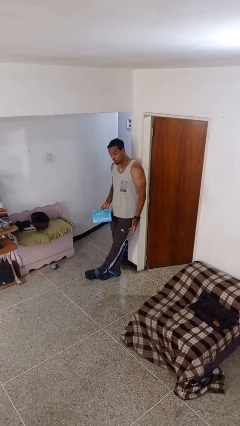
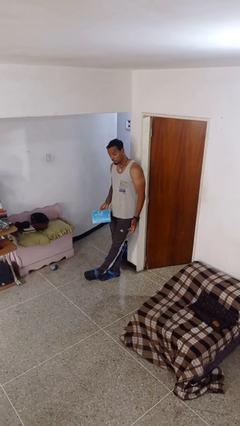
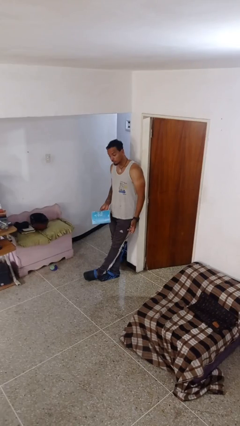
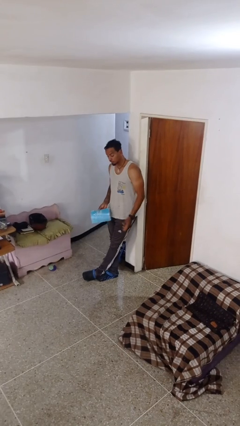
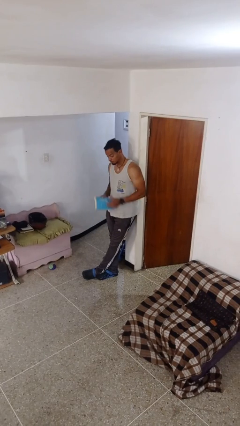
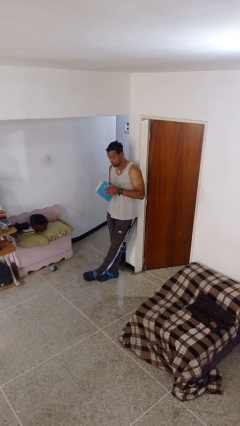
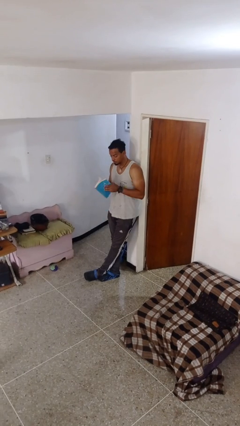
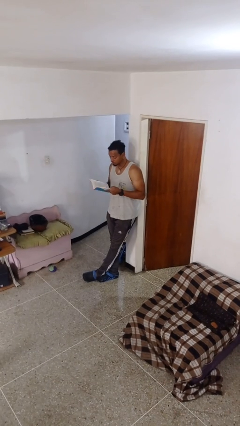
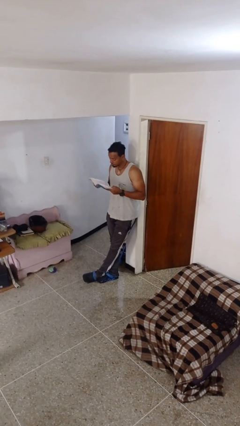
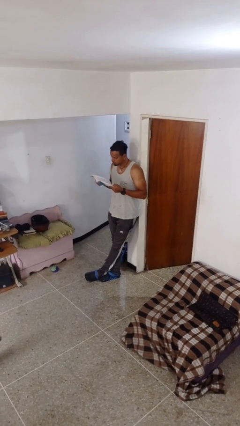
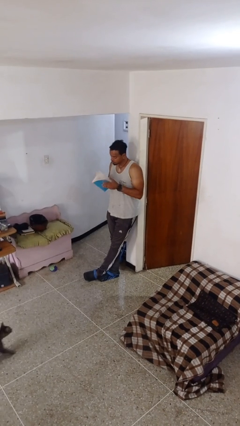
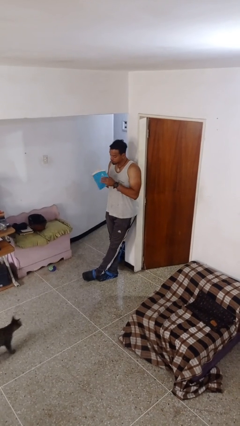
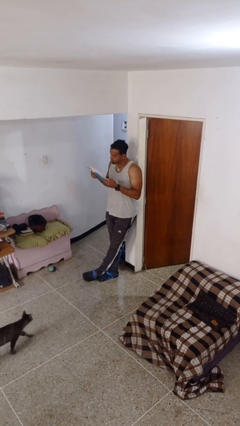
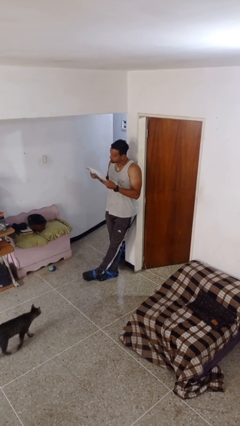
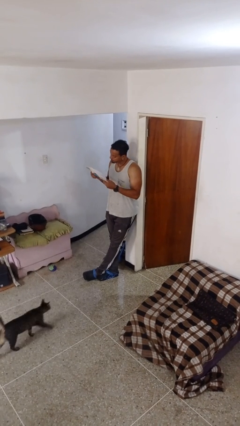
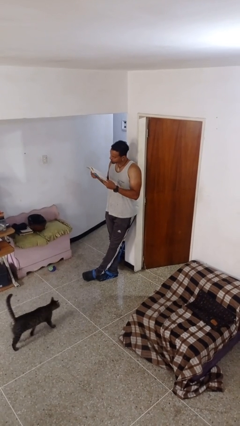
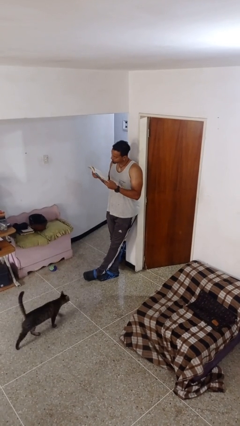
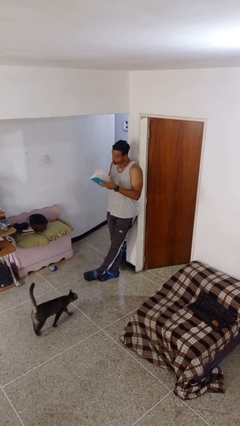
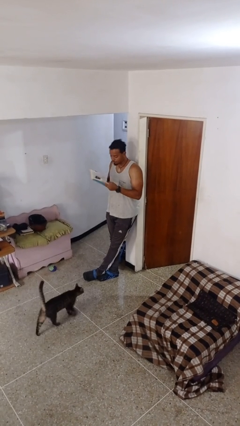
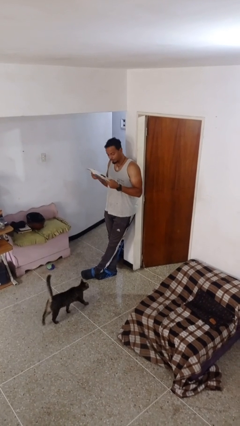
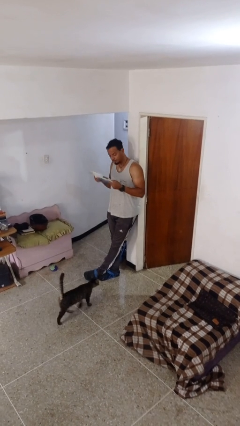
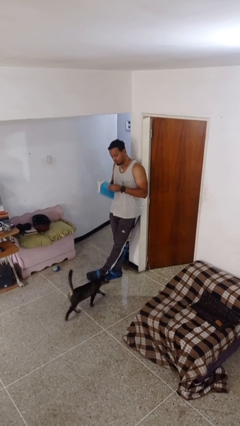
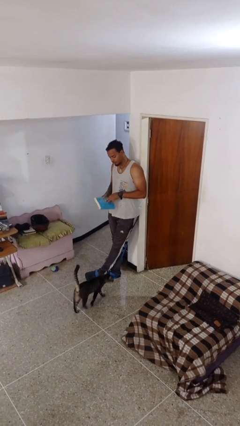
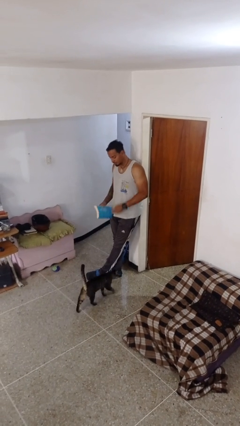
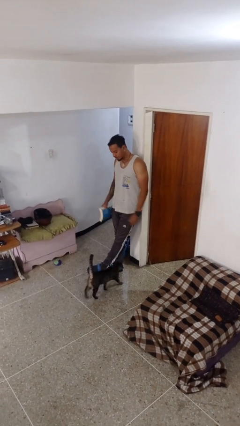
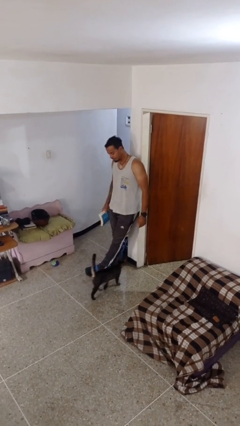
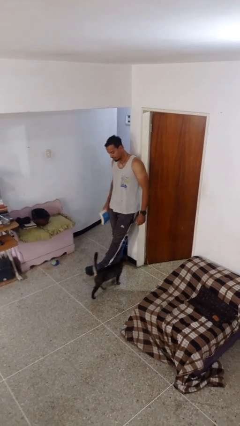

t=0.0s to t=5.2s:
person reads book

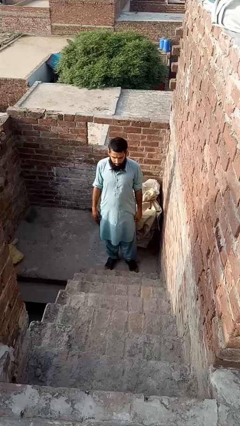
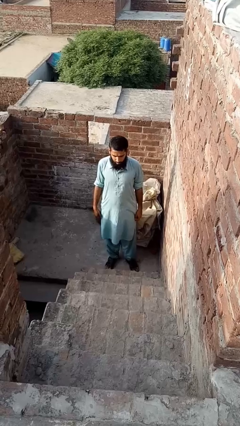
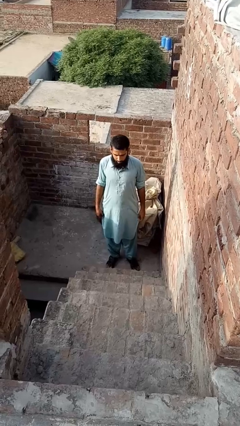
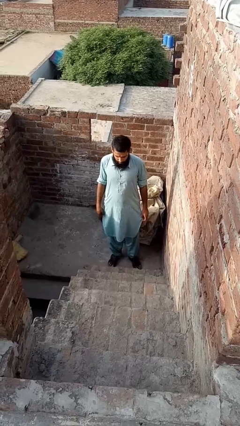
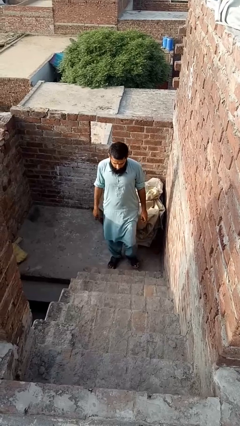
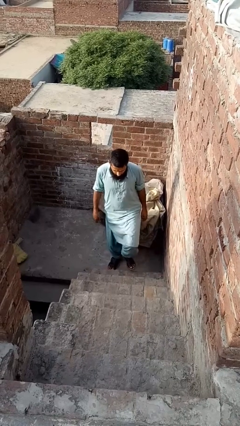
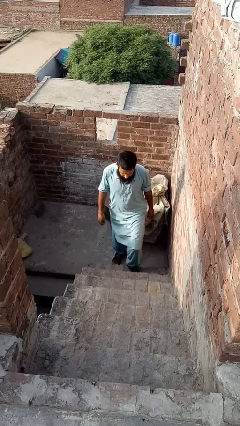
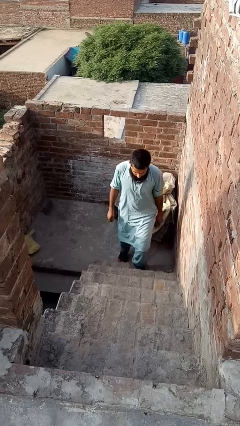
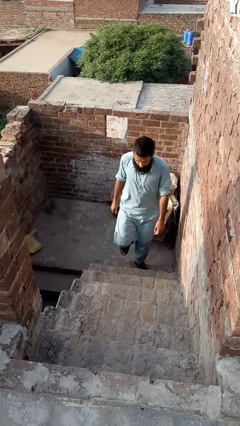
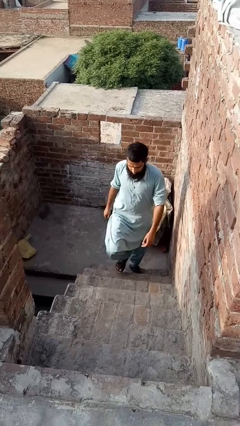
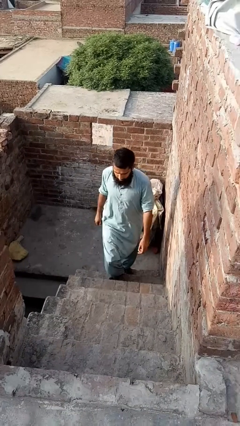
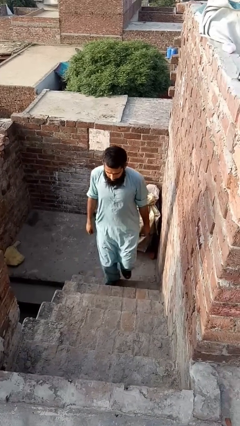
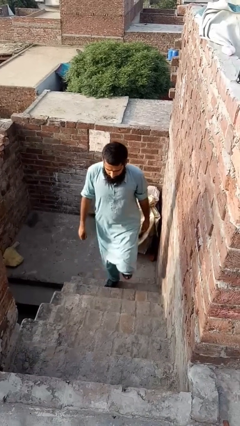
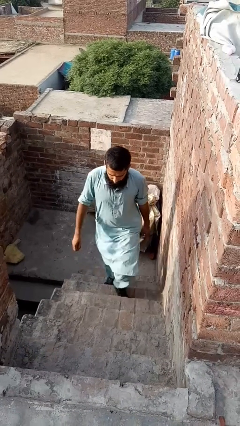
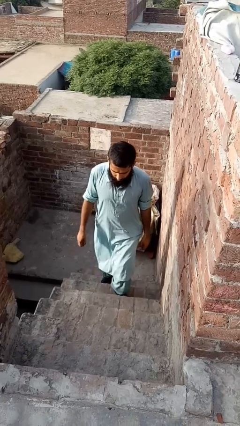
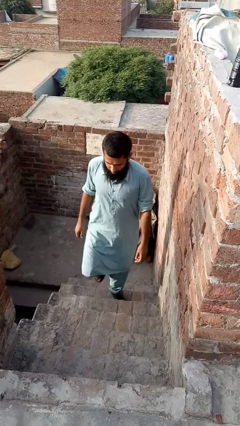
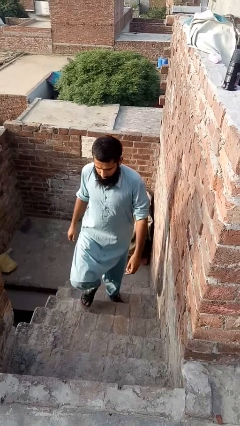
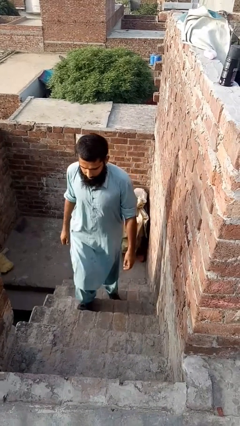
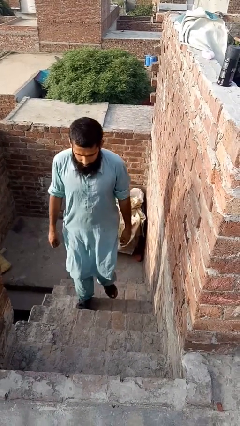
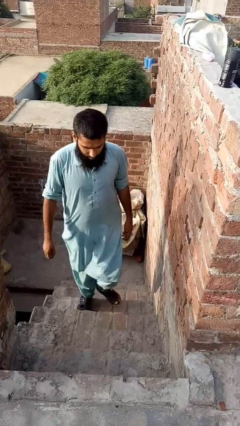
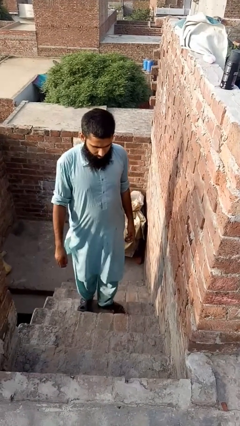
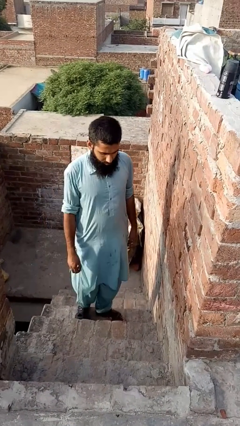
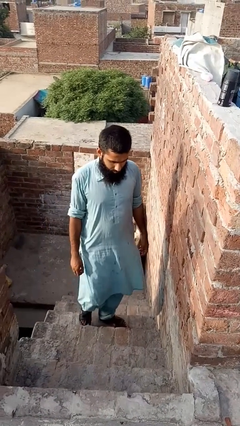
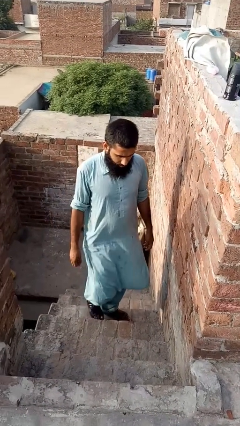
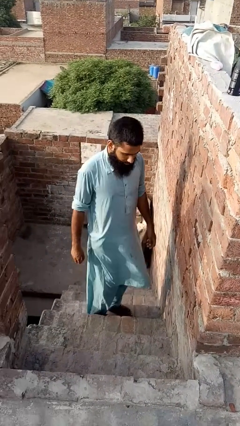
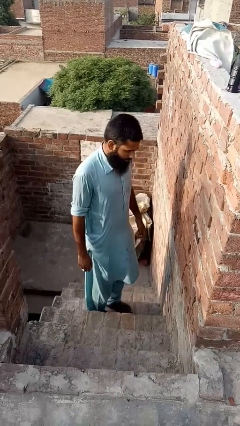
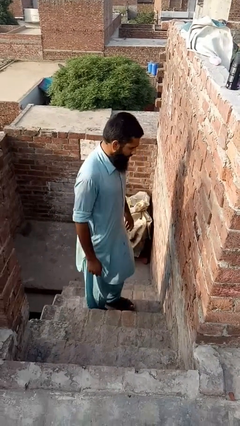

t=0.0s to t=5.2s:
person climbs up stairs

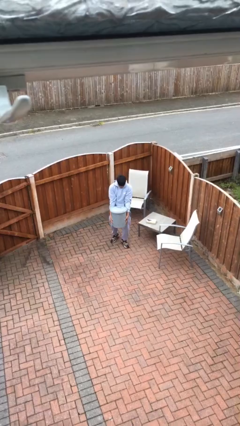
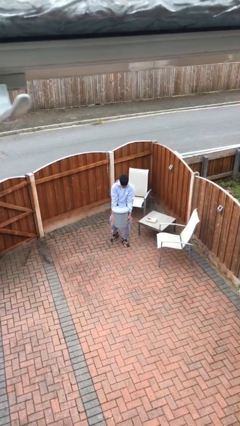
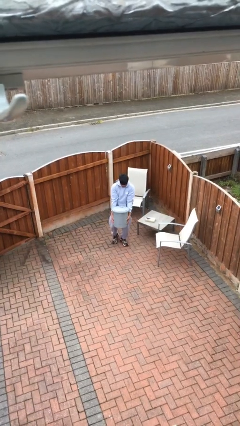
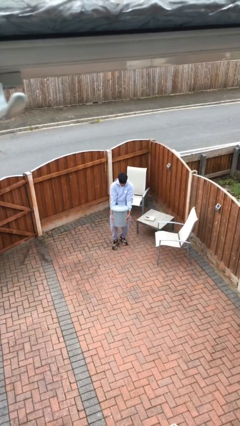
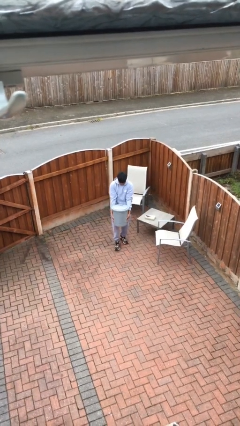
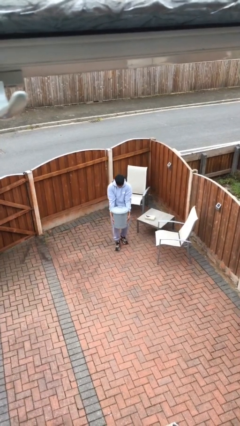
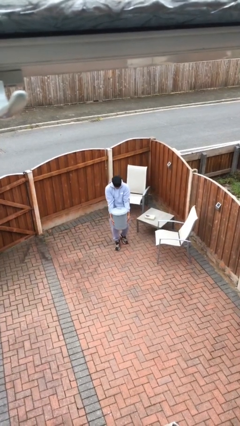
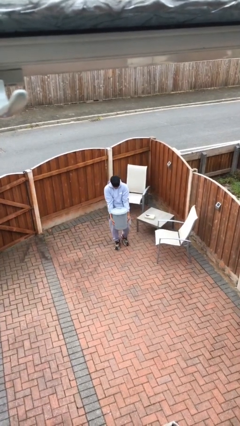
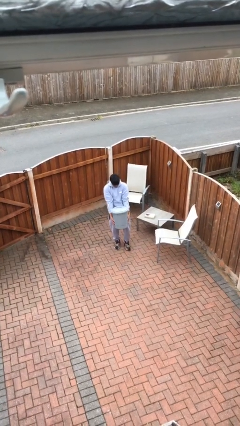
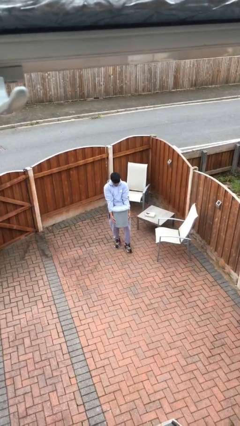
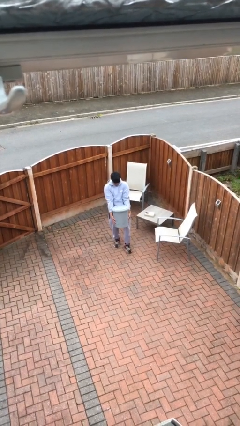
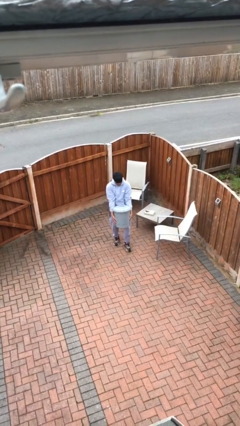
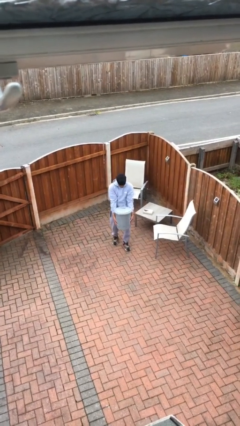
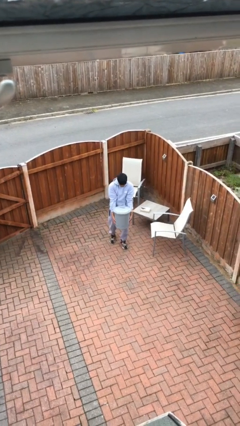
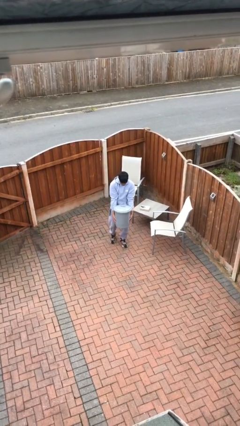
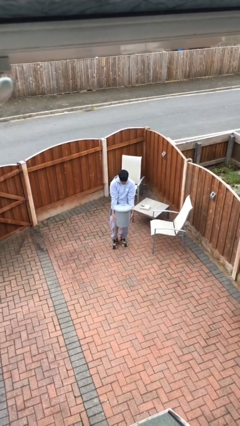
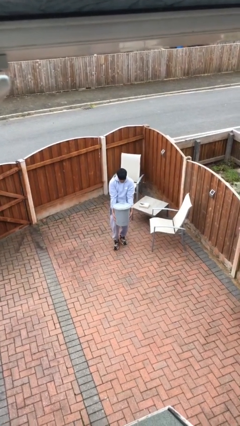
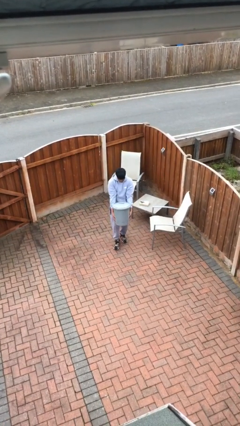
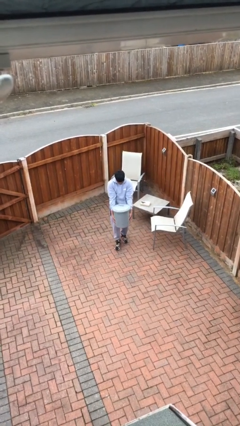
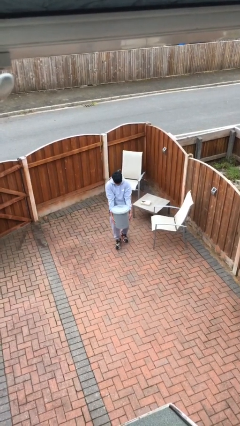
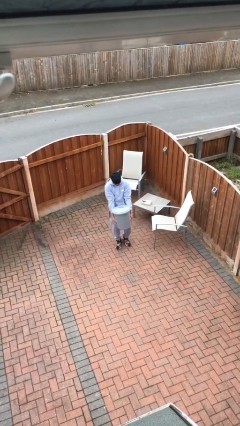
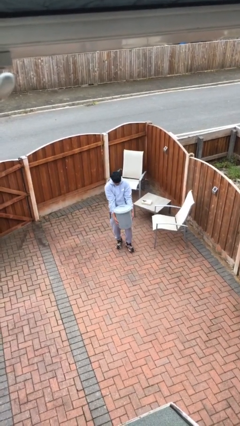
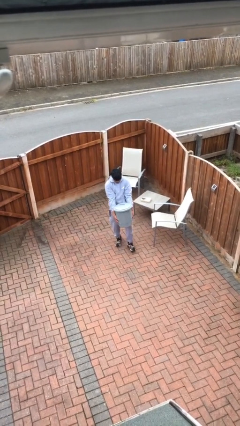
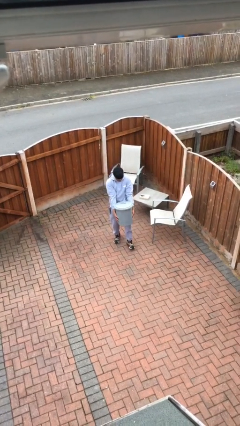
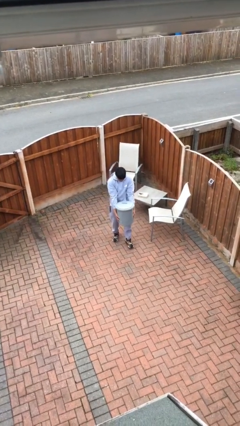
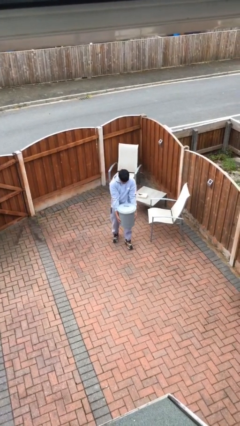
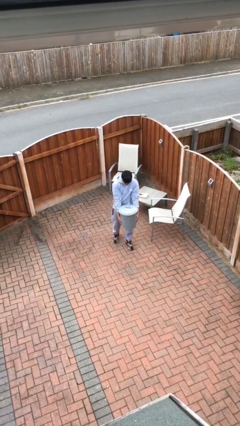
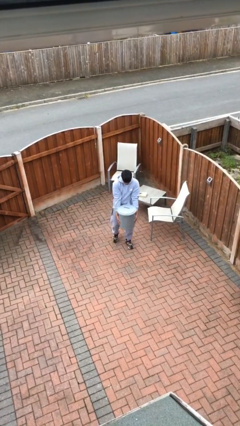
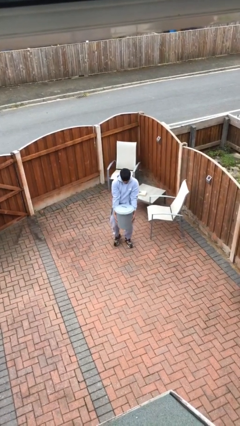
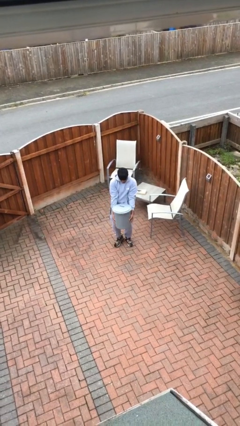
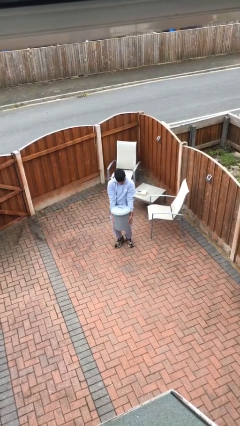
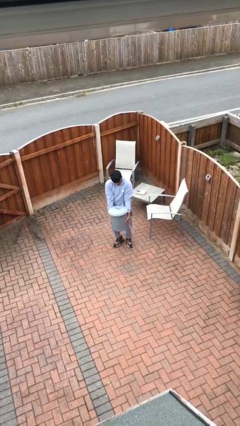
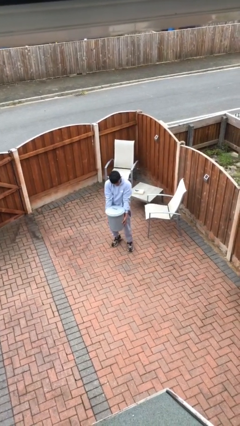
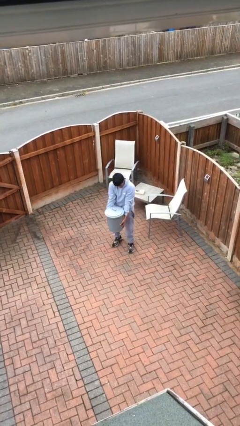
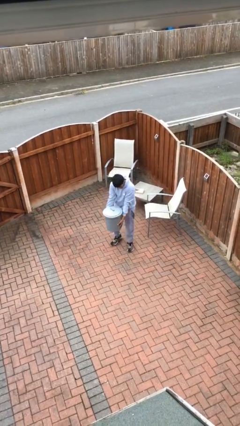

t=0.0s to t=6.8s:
person carries heavy object

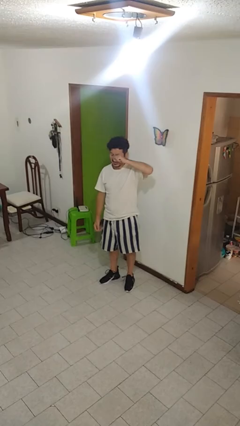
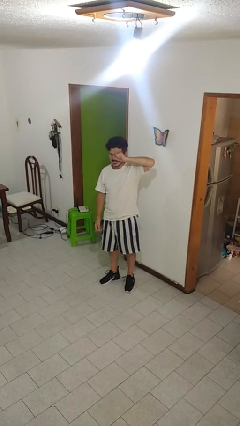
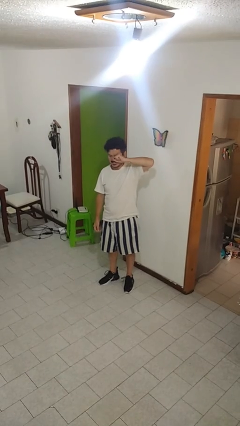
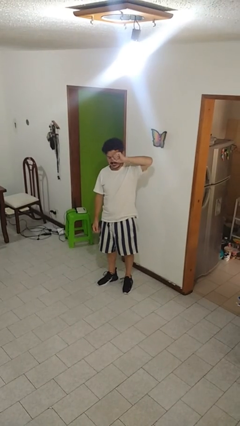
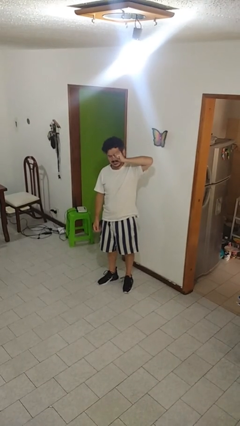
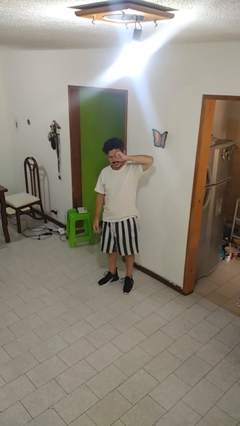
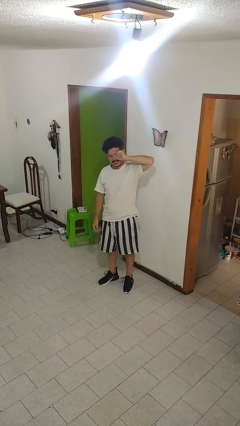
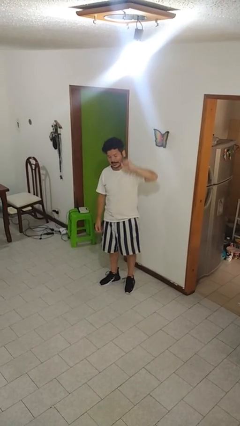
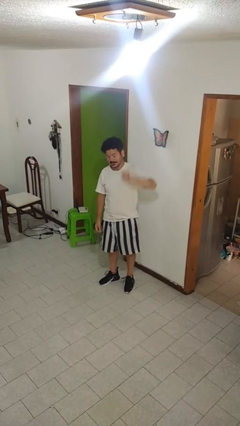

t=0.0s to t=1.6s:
person rubs eyes
